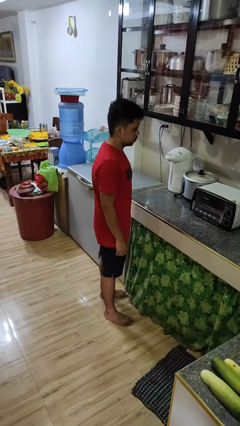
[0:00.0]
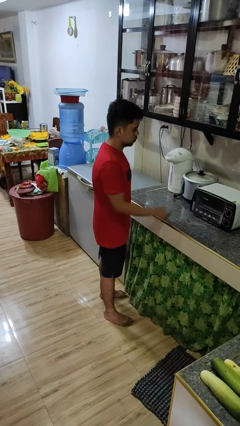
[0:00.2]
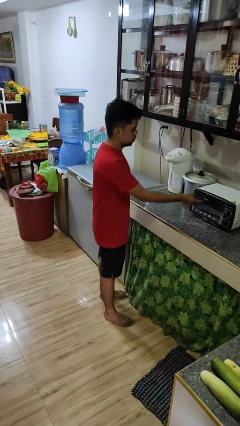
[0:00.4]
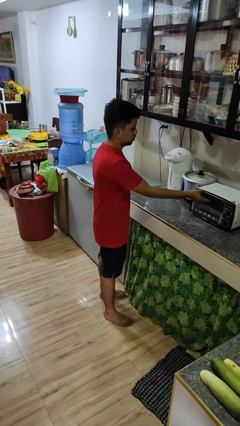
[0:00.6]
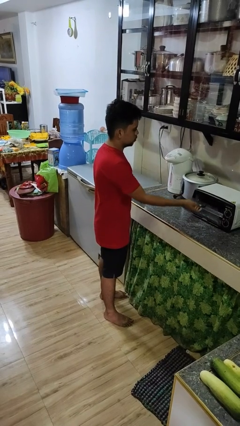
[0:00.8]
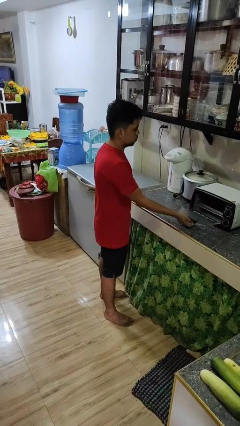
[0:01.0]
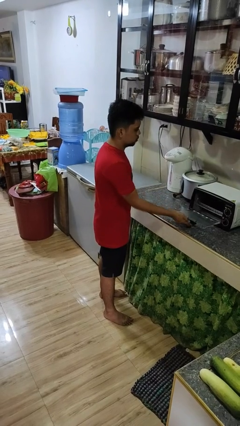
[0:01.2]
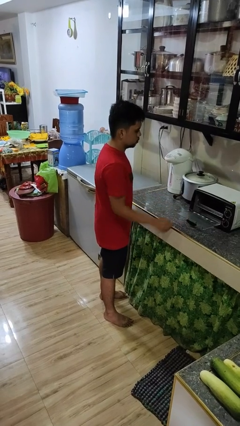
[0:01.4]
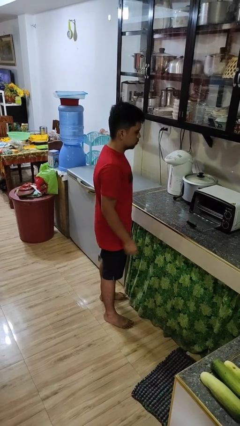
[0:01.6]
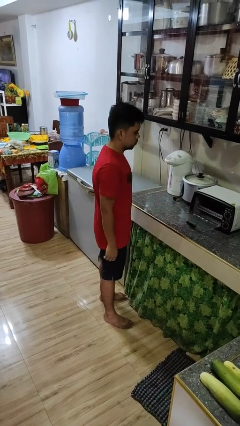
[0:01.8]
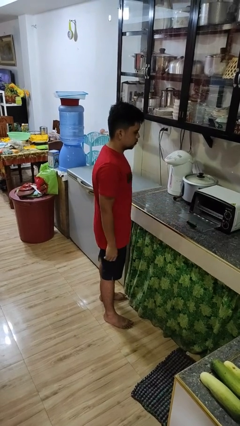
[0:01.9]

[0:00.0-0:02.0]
person opens microwave

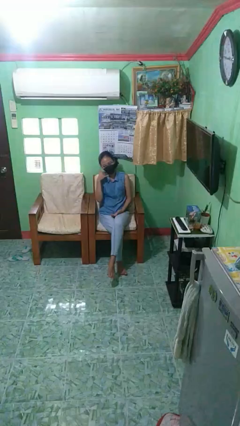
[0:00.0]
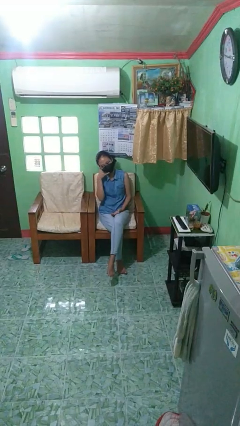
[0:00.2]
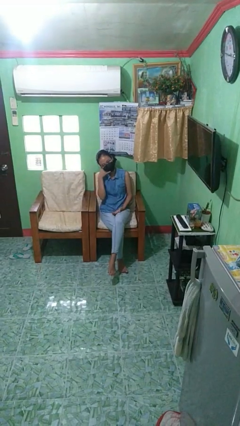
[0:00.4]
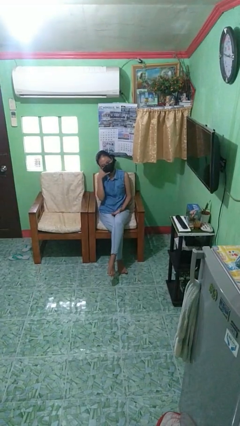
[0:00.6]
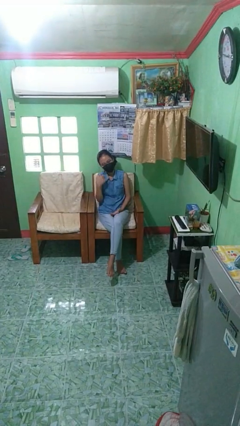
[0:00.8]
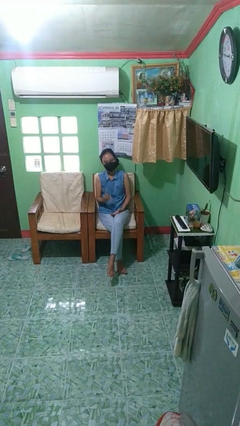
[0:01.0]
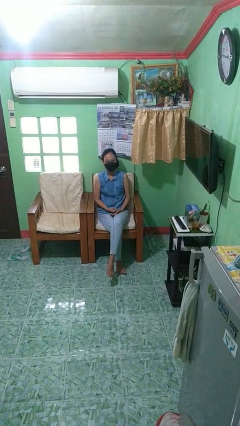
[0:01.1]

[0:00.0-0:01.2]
person gestures call me

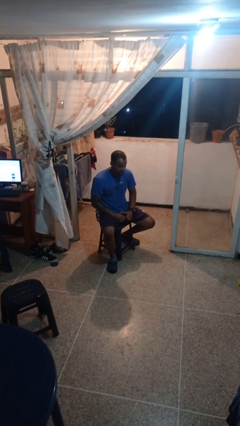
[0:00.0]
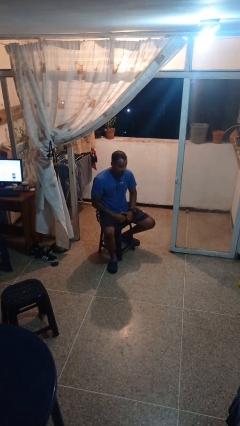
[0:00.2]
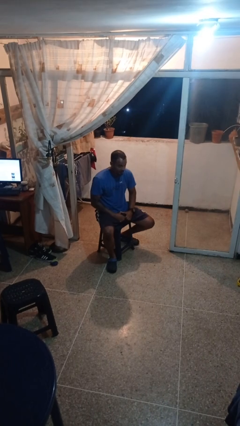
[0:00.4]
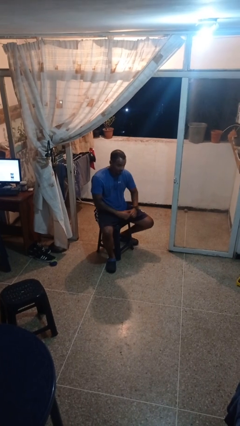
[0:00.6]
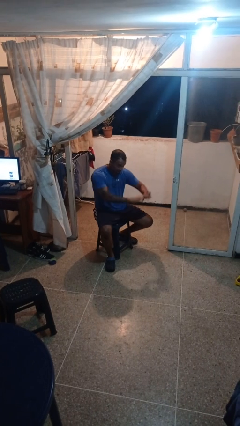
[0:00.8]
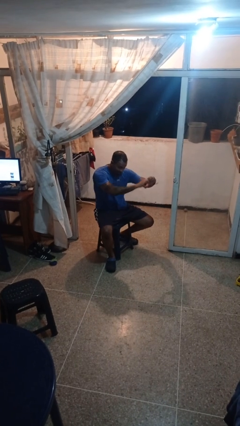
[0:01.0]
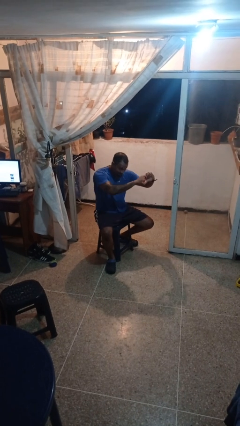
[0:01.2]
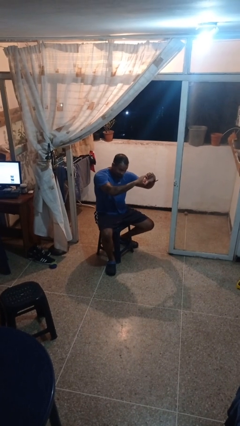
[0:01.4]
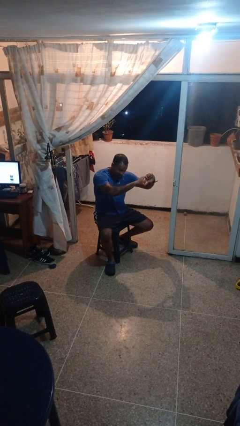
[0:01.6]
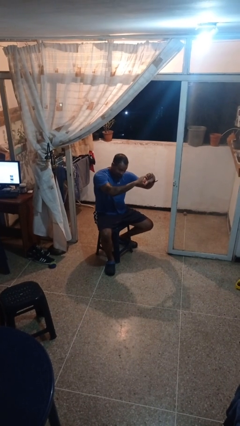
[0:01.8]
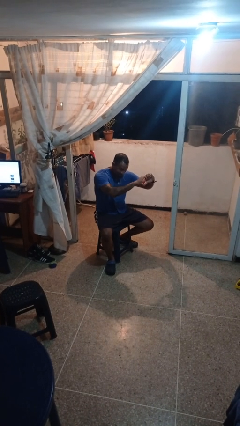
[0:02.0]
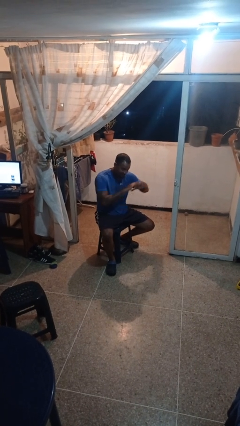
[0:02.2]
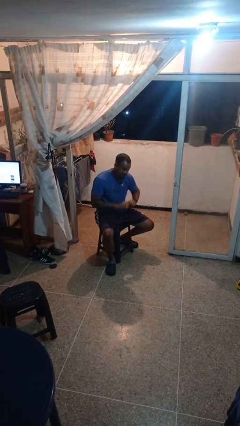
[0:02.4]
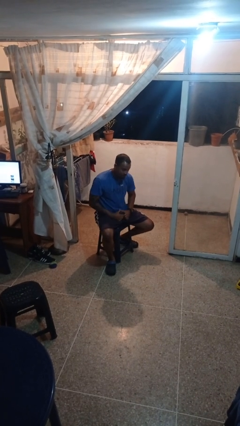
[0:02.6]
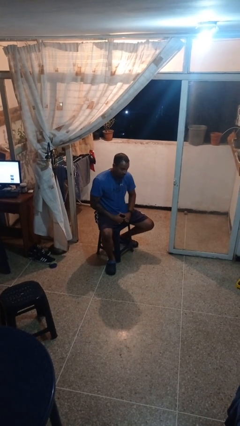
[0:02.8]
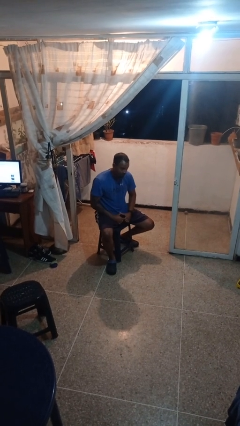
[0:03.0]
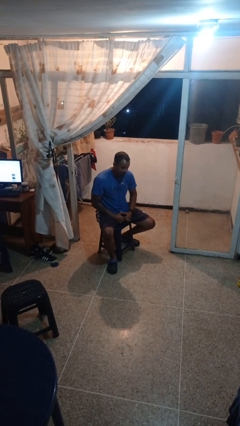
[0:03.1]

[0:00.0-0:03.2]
person gestures heart

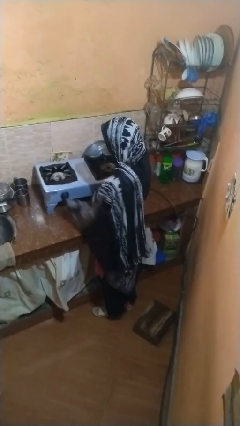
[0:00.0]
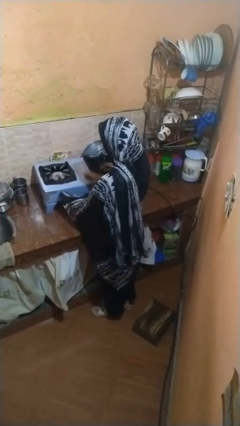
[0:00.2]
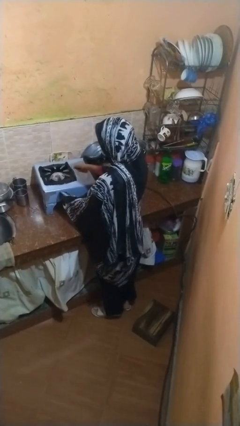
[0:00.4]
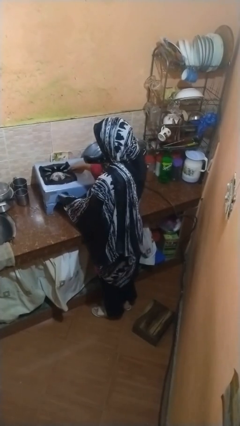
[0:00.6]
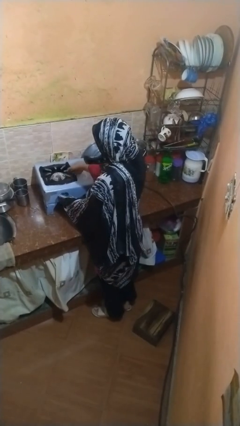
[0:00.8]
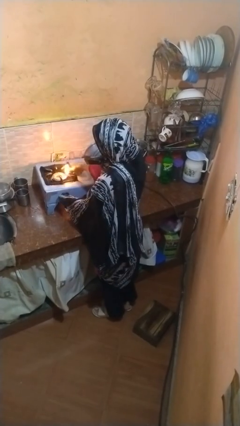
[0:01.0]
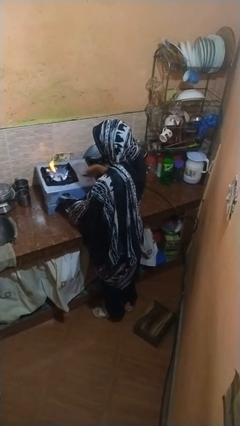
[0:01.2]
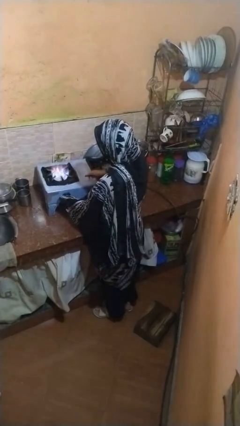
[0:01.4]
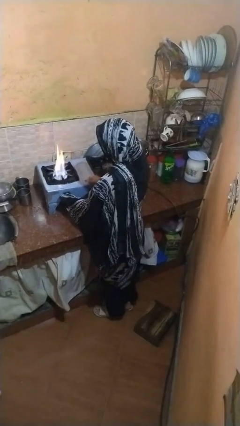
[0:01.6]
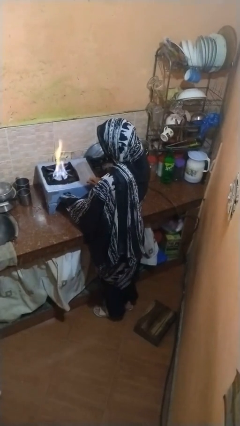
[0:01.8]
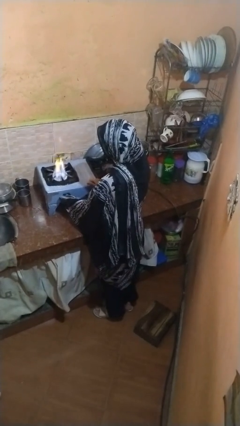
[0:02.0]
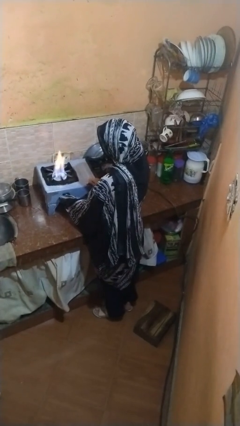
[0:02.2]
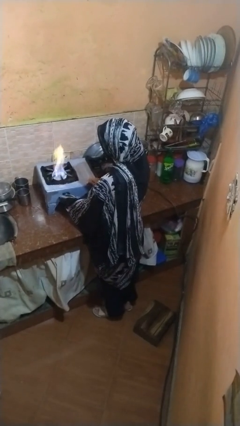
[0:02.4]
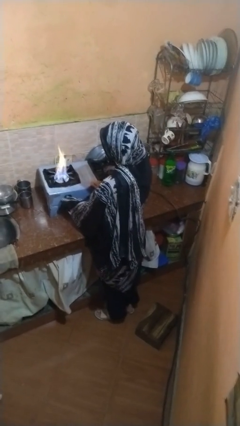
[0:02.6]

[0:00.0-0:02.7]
person turns on stovetop

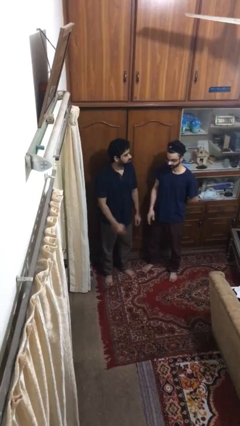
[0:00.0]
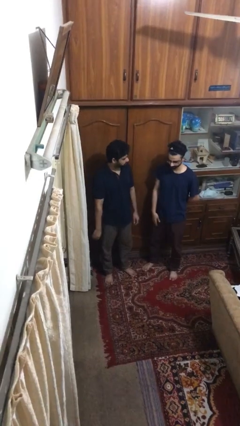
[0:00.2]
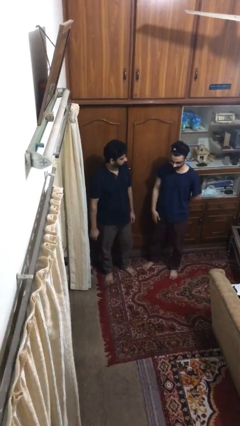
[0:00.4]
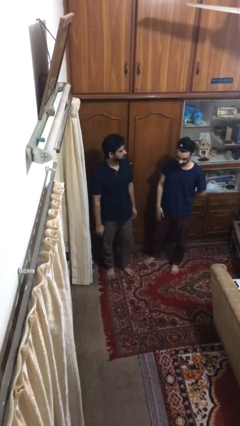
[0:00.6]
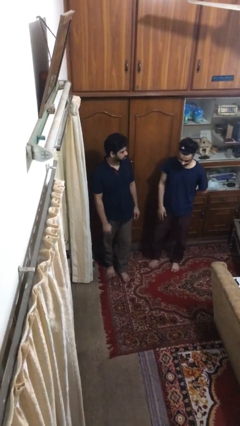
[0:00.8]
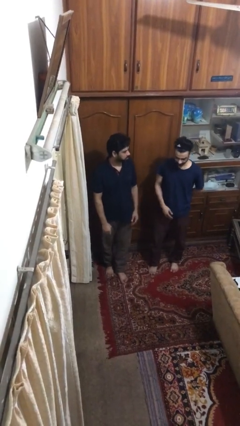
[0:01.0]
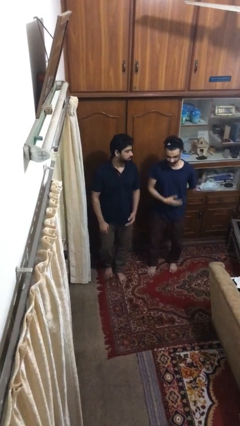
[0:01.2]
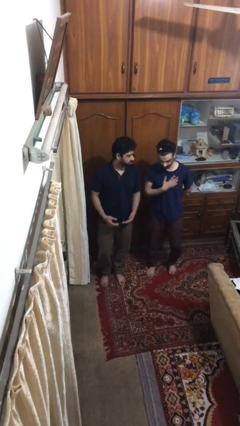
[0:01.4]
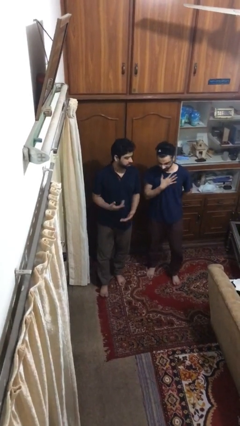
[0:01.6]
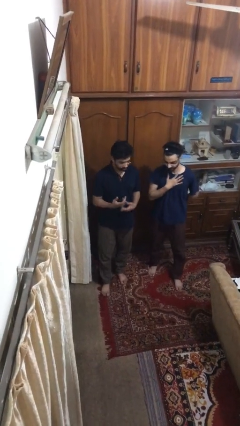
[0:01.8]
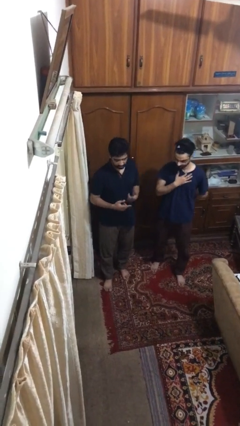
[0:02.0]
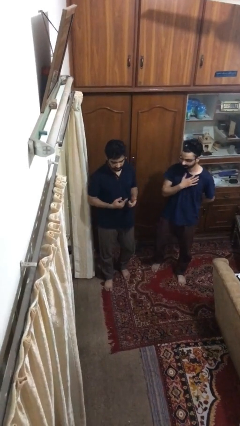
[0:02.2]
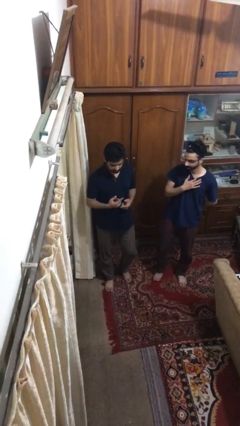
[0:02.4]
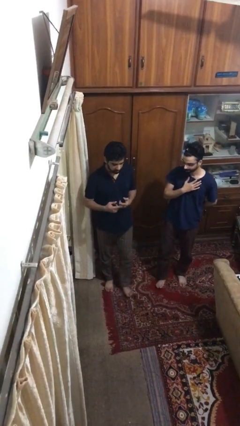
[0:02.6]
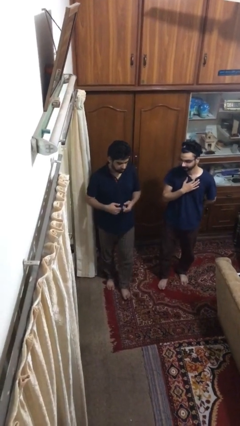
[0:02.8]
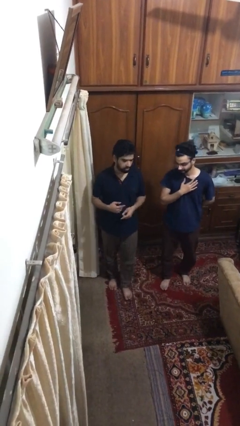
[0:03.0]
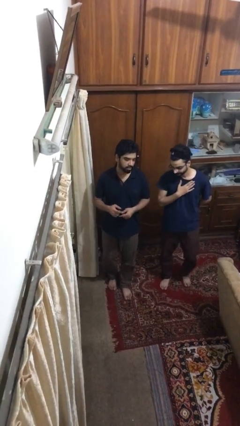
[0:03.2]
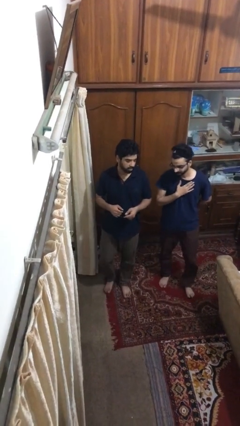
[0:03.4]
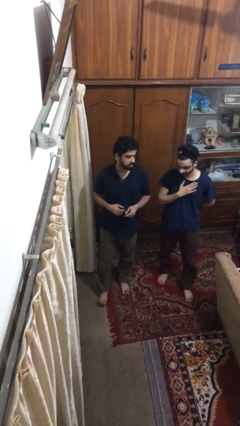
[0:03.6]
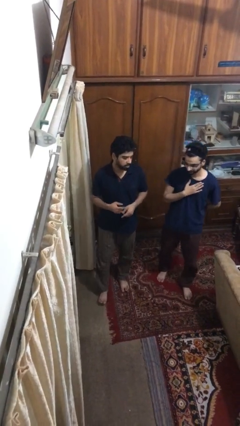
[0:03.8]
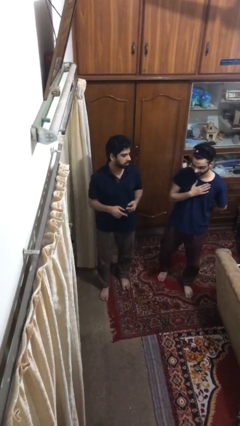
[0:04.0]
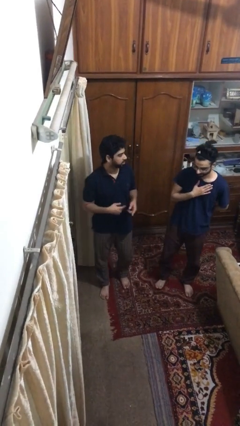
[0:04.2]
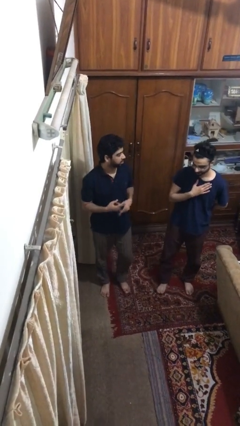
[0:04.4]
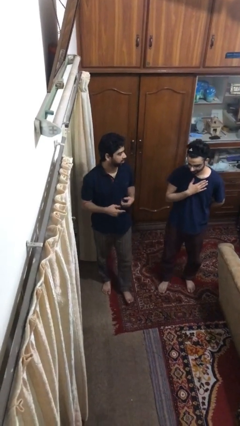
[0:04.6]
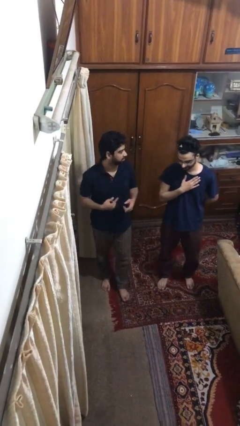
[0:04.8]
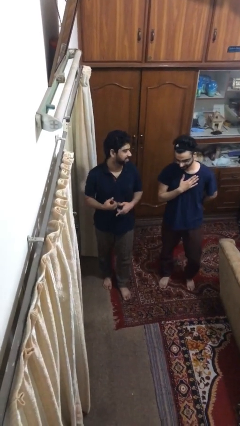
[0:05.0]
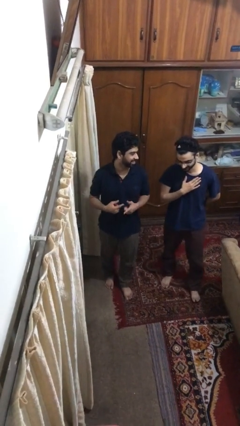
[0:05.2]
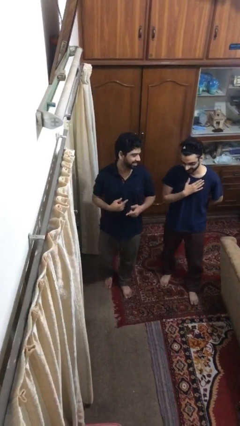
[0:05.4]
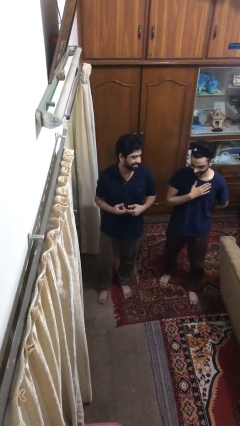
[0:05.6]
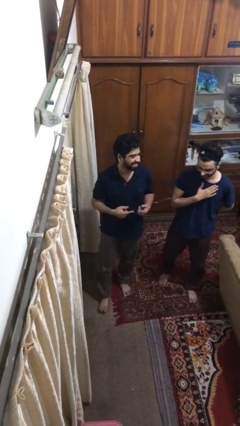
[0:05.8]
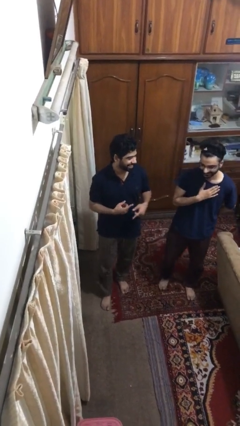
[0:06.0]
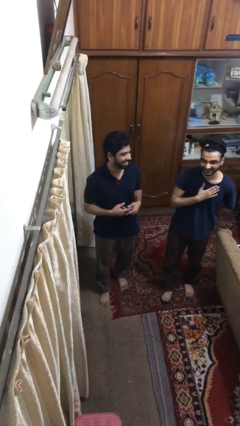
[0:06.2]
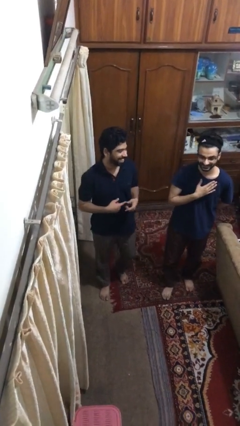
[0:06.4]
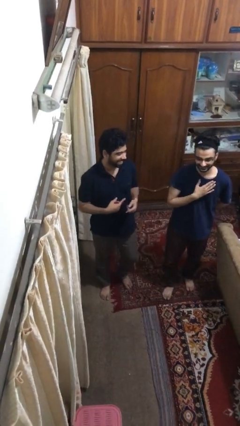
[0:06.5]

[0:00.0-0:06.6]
person talks to person

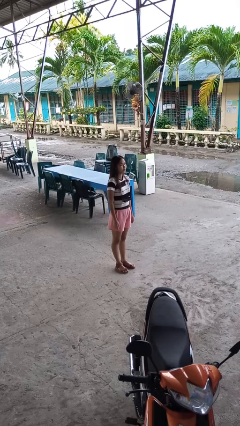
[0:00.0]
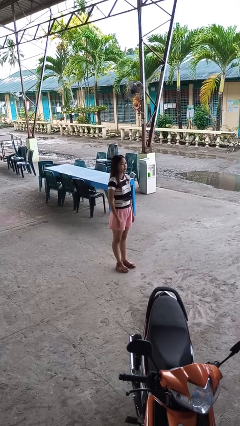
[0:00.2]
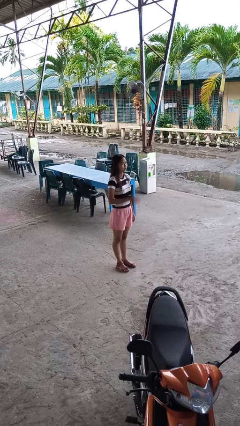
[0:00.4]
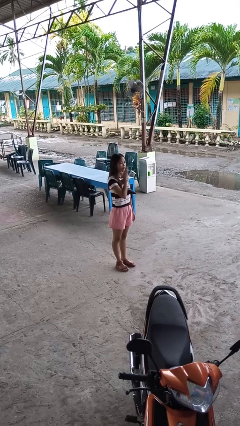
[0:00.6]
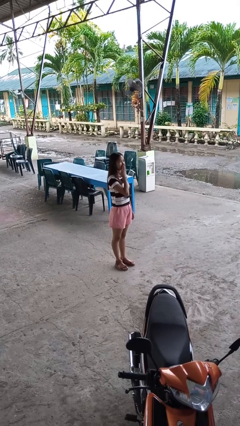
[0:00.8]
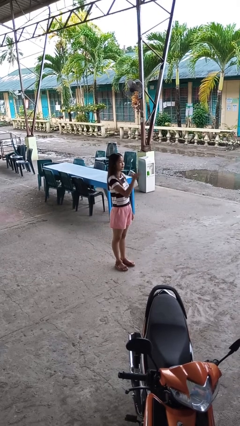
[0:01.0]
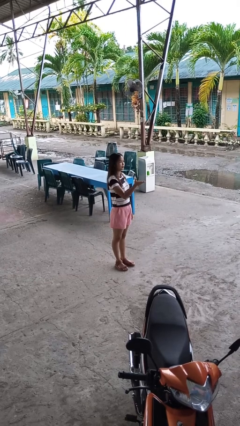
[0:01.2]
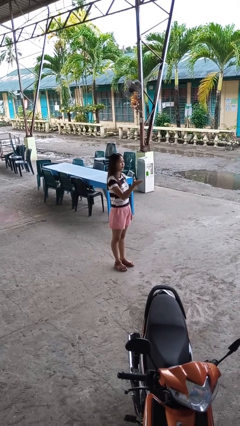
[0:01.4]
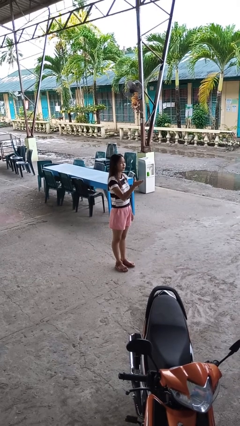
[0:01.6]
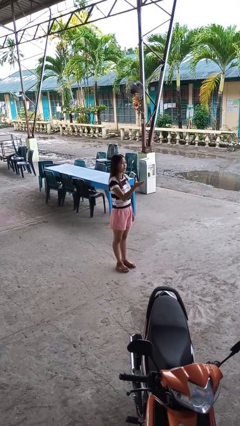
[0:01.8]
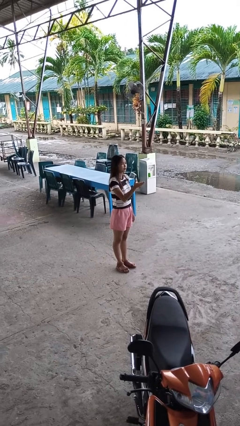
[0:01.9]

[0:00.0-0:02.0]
person gestures blow kiss
